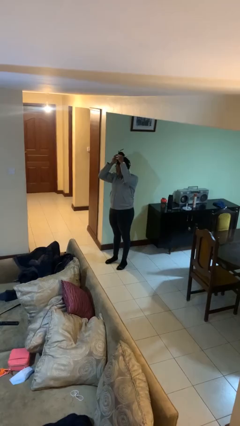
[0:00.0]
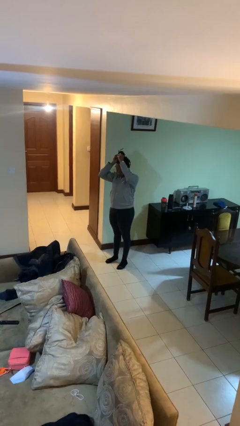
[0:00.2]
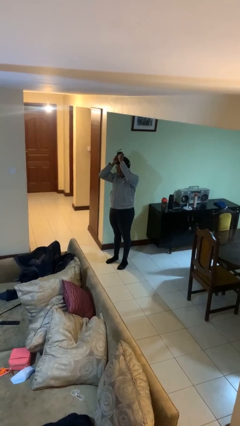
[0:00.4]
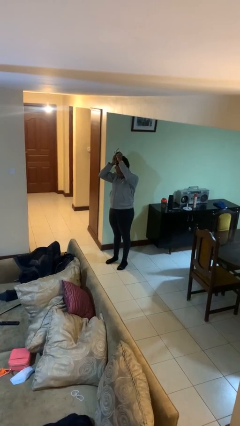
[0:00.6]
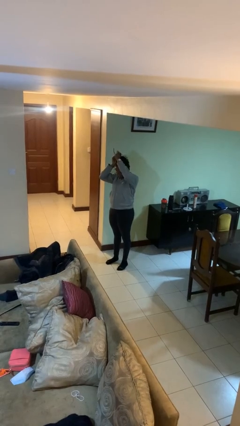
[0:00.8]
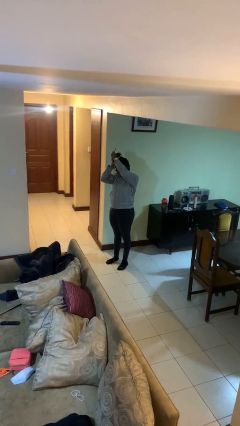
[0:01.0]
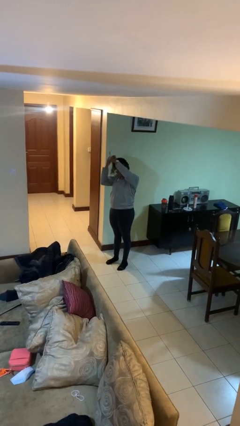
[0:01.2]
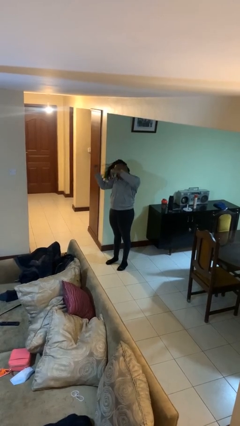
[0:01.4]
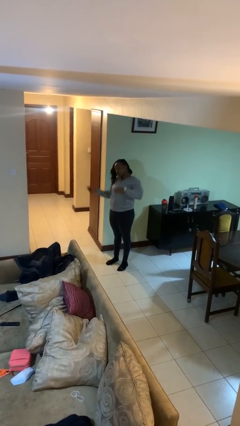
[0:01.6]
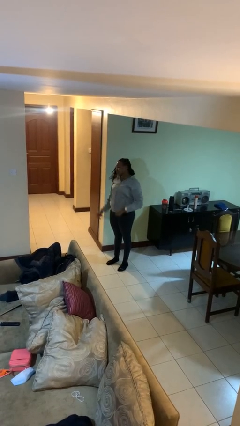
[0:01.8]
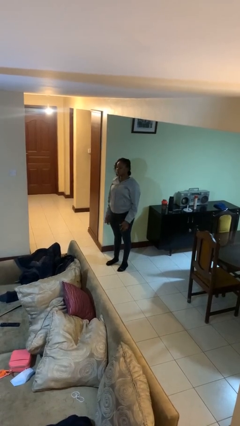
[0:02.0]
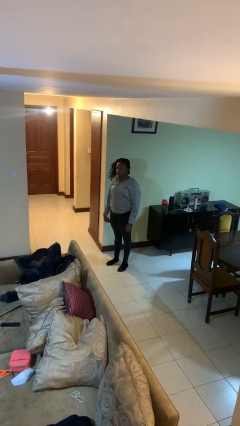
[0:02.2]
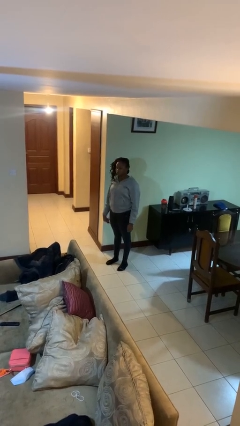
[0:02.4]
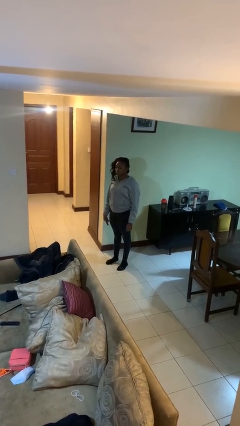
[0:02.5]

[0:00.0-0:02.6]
person takes off hairtie

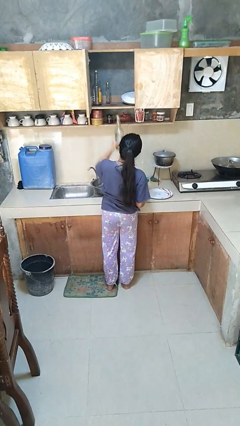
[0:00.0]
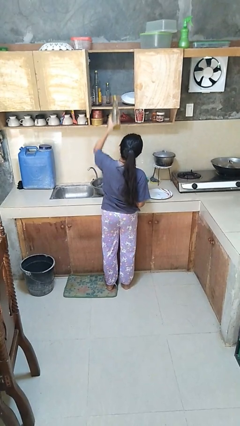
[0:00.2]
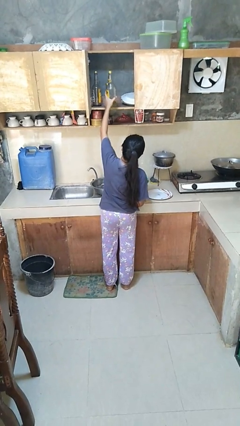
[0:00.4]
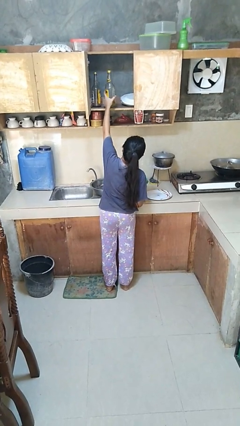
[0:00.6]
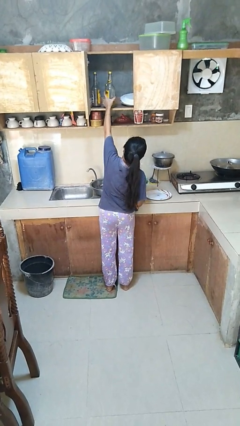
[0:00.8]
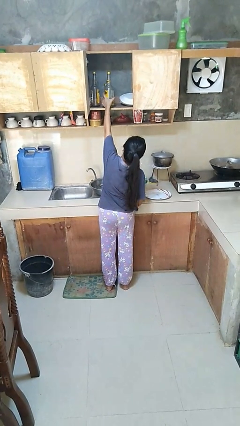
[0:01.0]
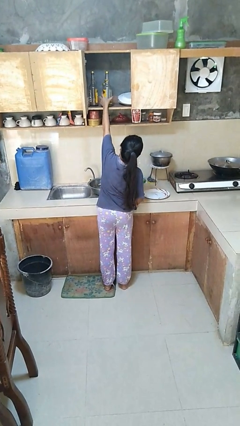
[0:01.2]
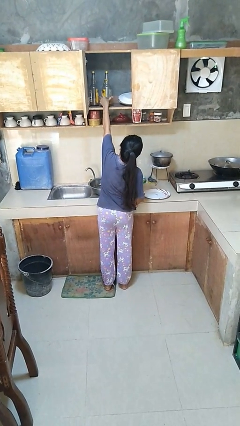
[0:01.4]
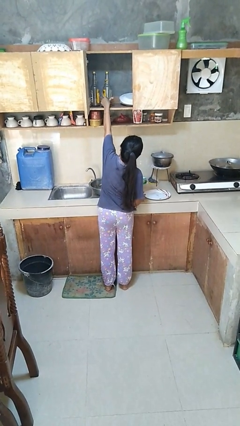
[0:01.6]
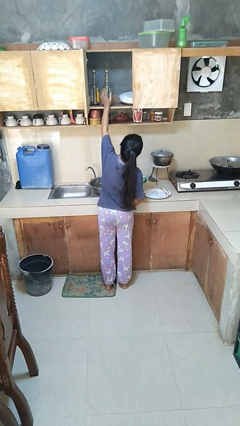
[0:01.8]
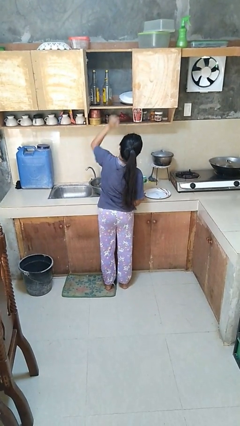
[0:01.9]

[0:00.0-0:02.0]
person puts object in cabinet

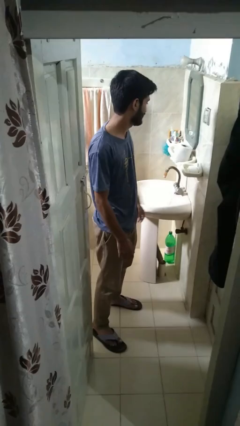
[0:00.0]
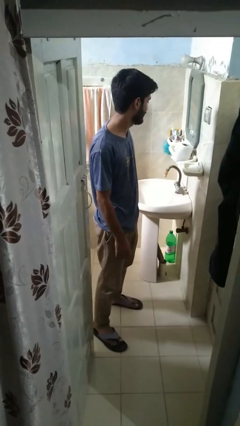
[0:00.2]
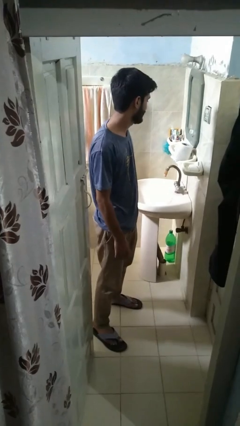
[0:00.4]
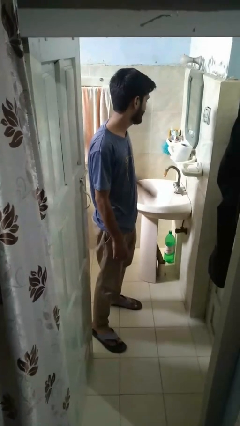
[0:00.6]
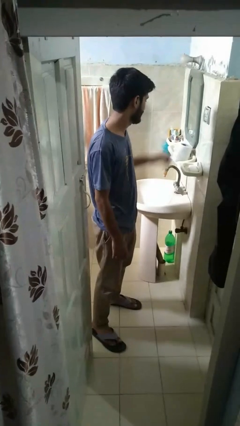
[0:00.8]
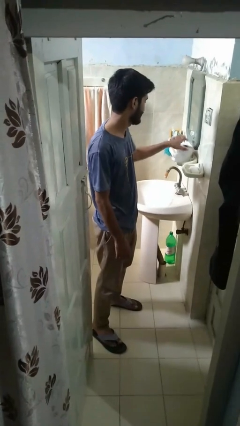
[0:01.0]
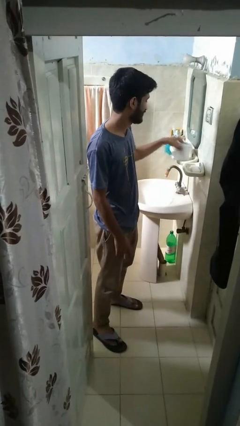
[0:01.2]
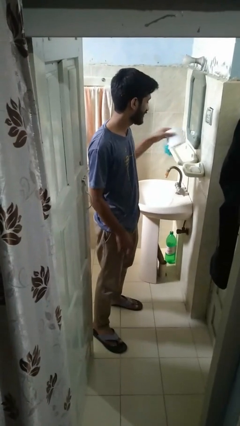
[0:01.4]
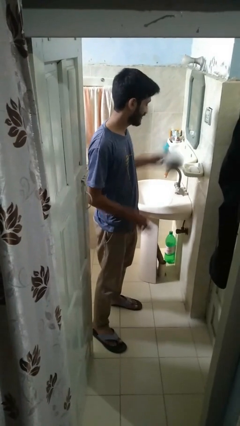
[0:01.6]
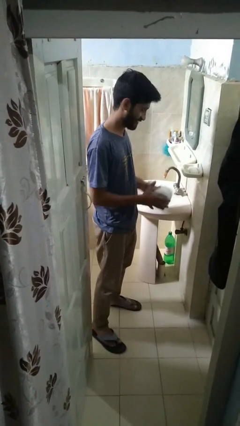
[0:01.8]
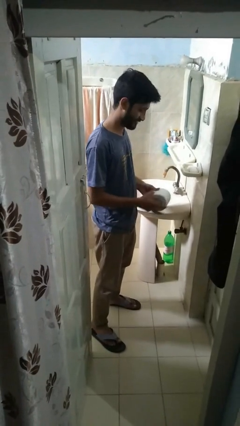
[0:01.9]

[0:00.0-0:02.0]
person picks up object from countertop

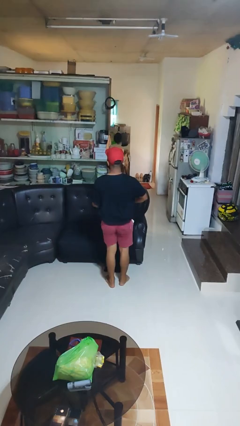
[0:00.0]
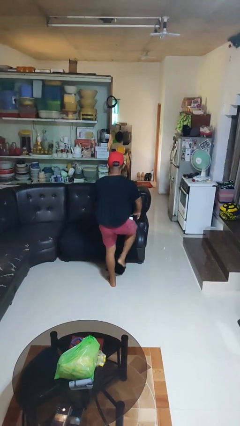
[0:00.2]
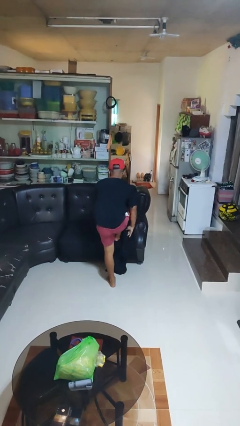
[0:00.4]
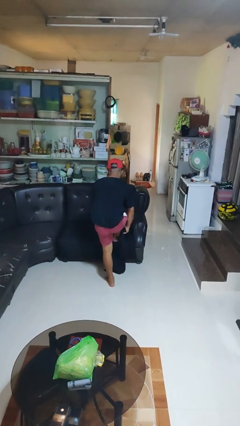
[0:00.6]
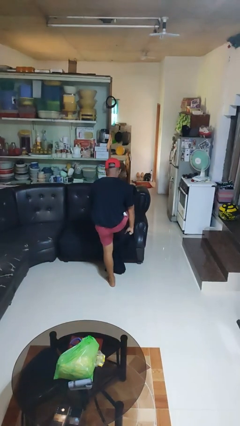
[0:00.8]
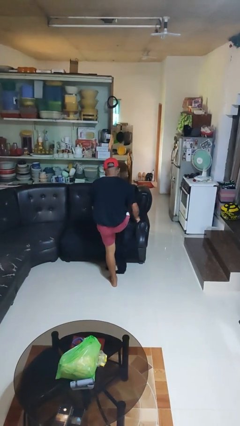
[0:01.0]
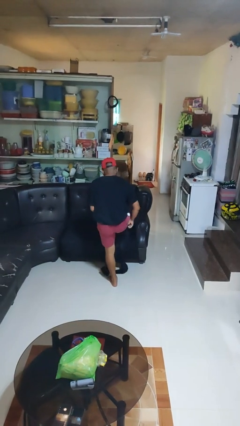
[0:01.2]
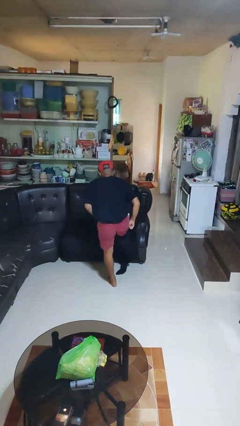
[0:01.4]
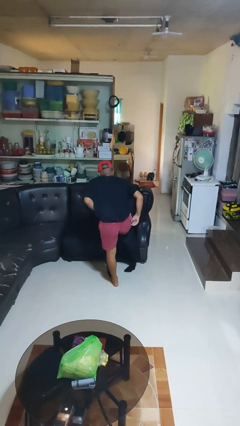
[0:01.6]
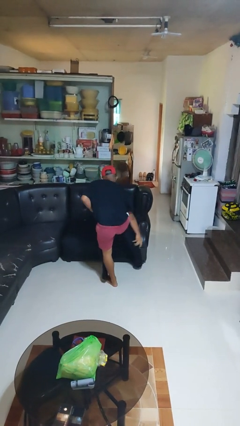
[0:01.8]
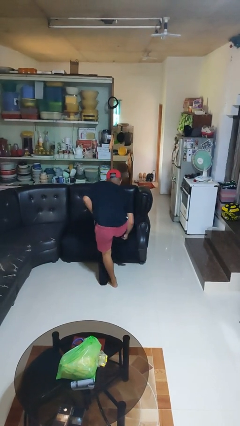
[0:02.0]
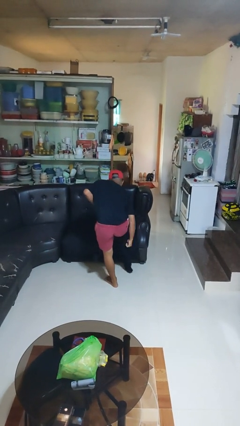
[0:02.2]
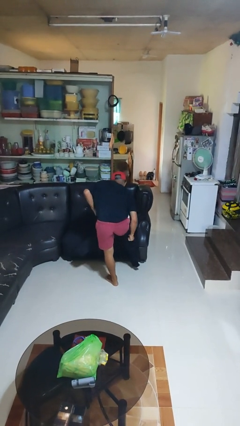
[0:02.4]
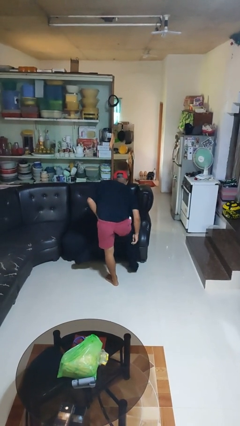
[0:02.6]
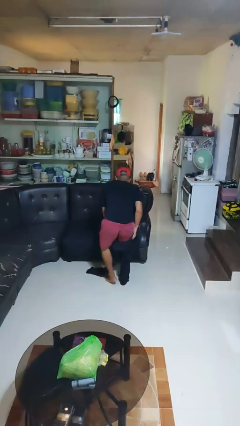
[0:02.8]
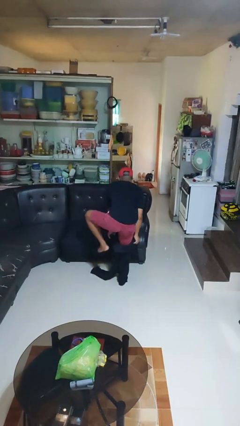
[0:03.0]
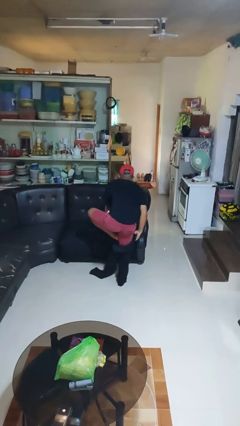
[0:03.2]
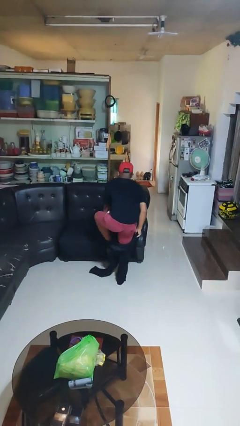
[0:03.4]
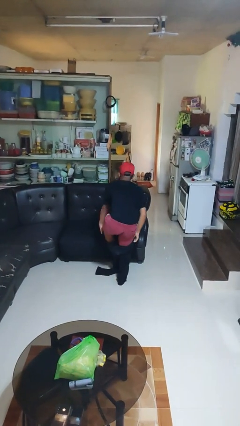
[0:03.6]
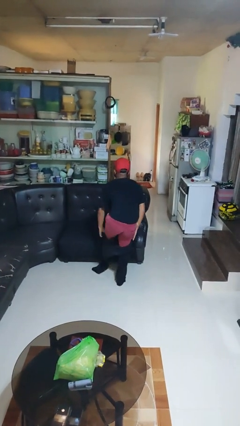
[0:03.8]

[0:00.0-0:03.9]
person puts on pants

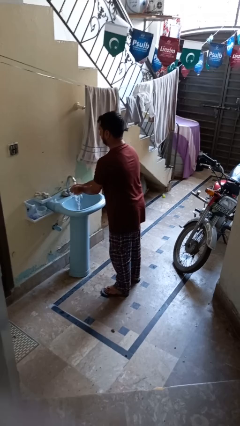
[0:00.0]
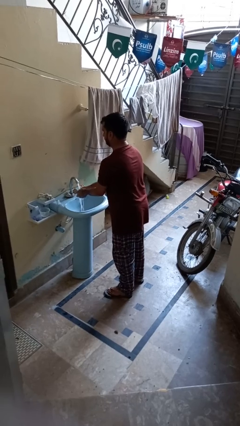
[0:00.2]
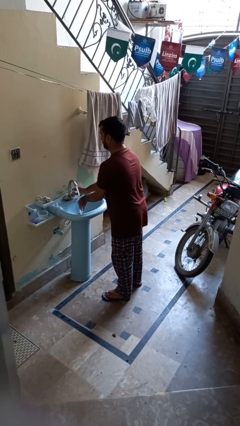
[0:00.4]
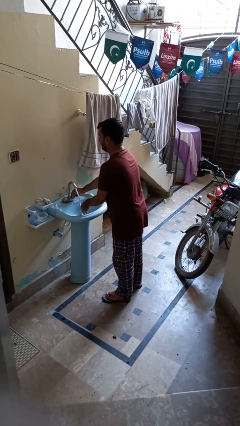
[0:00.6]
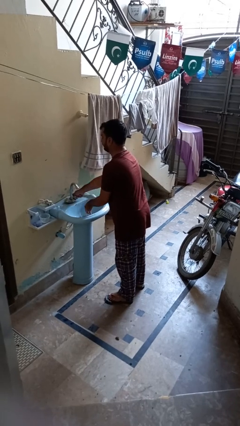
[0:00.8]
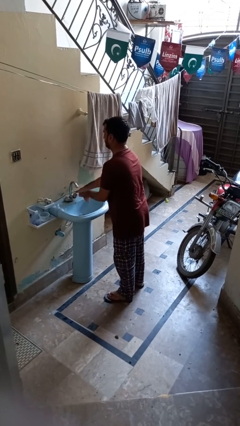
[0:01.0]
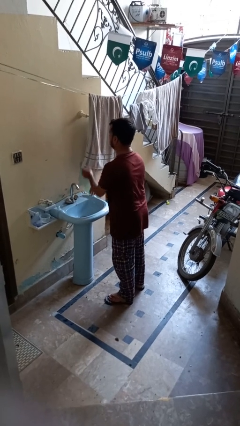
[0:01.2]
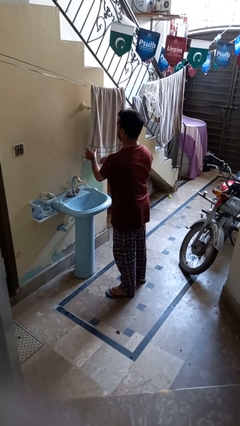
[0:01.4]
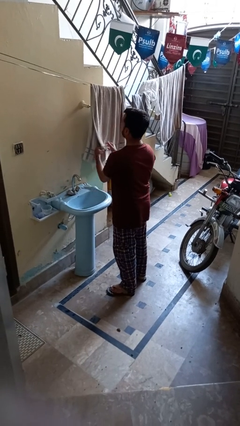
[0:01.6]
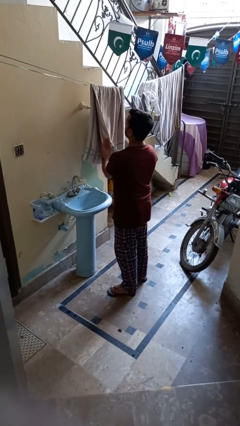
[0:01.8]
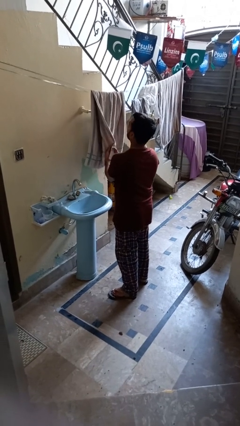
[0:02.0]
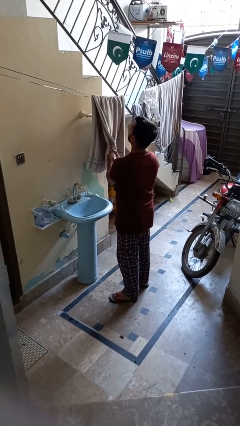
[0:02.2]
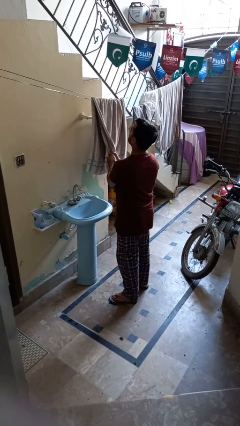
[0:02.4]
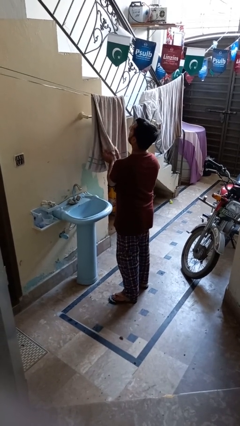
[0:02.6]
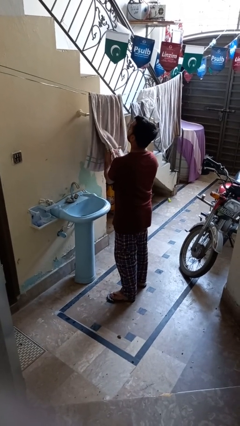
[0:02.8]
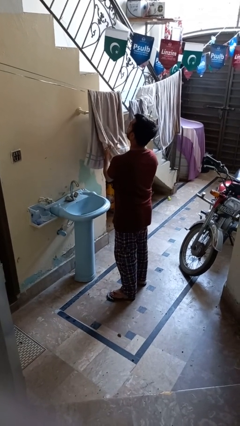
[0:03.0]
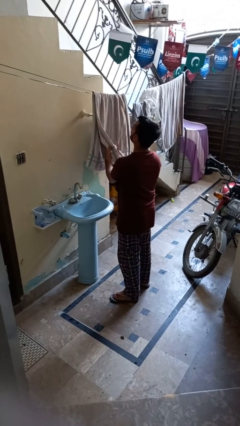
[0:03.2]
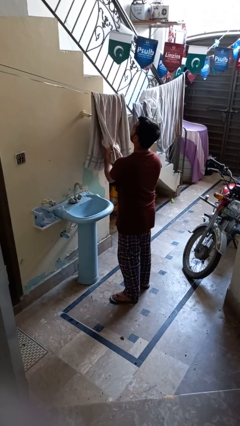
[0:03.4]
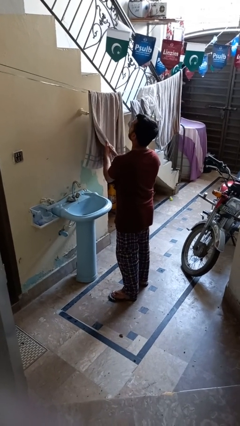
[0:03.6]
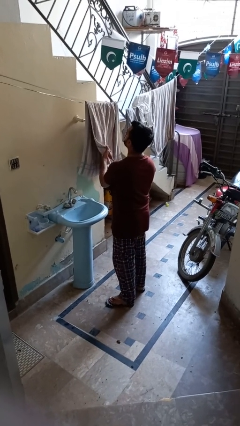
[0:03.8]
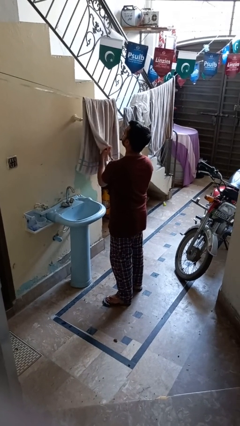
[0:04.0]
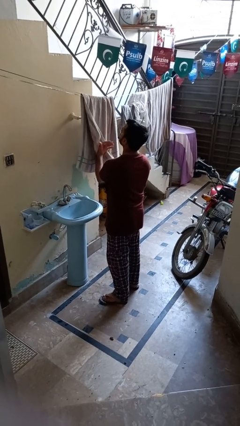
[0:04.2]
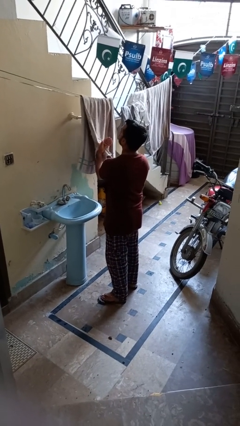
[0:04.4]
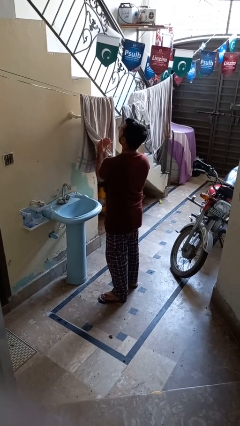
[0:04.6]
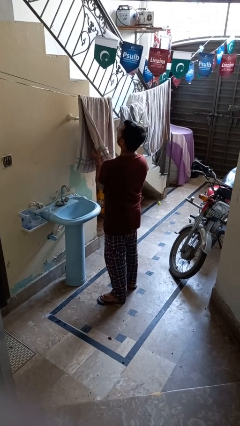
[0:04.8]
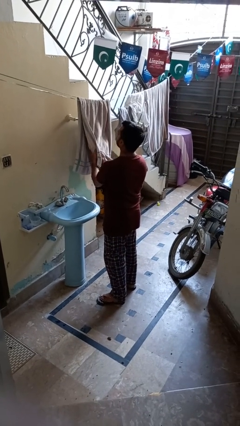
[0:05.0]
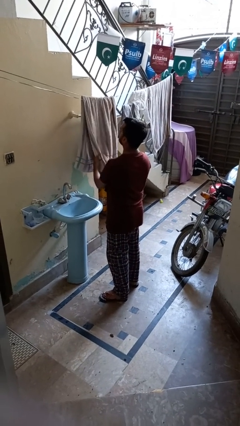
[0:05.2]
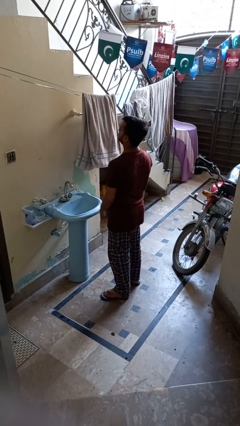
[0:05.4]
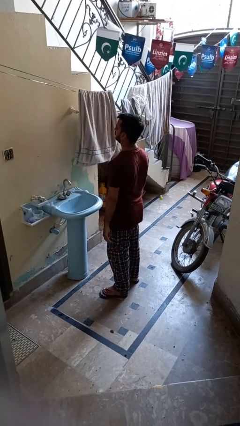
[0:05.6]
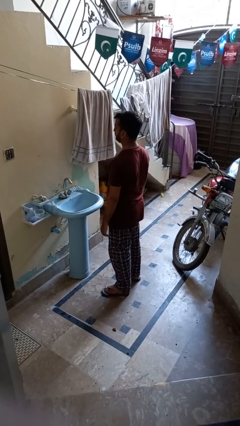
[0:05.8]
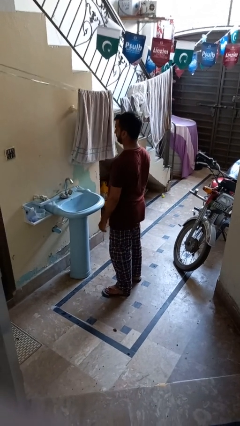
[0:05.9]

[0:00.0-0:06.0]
person dries hands with towel

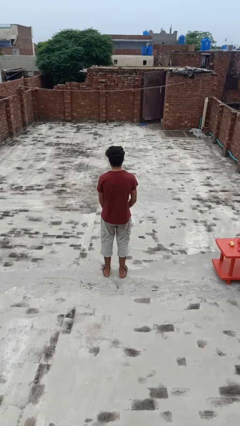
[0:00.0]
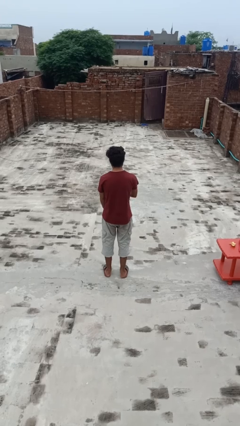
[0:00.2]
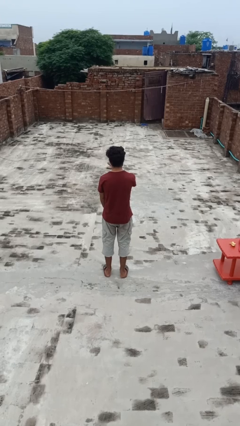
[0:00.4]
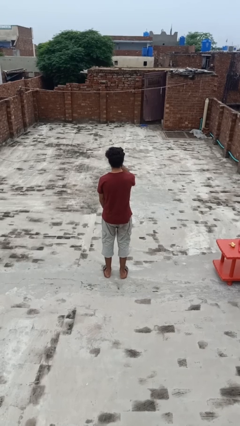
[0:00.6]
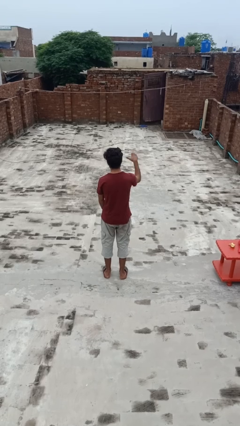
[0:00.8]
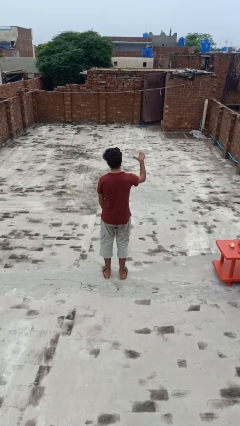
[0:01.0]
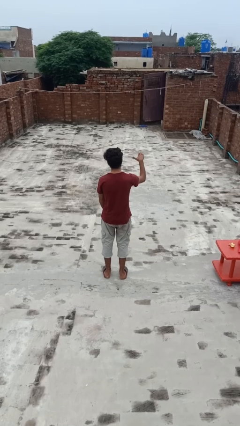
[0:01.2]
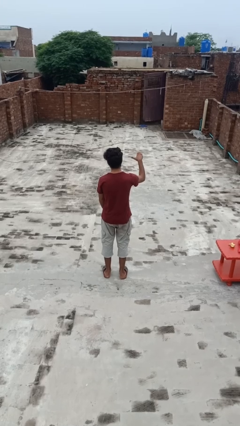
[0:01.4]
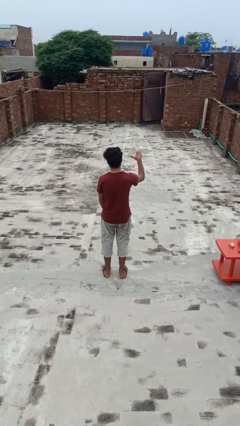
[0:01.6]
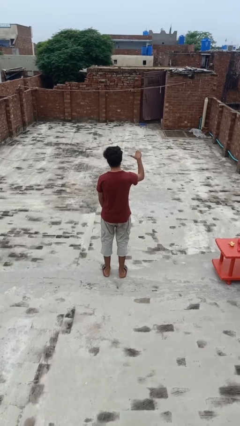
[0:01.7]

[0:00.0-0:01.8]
person gestures cut
